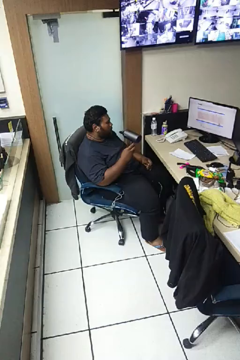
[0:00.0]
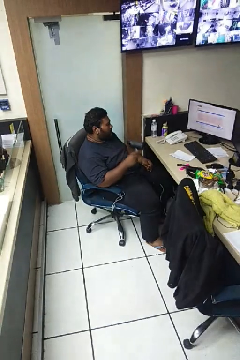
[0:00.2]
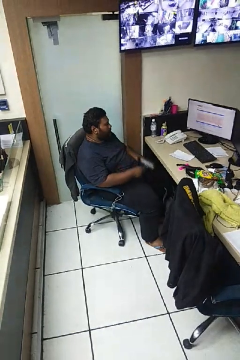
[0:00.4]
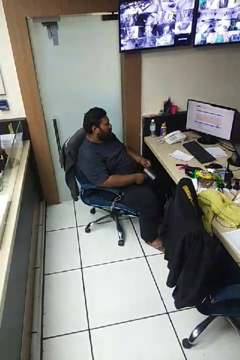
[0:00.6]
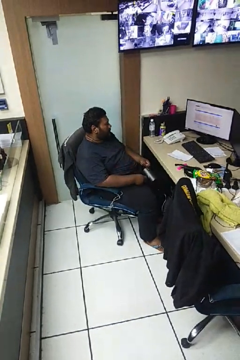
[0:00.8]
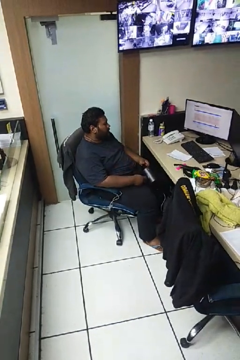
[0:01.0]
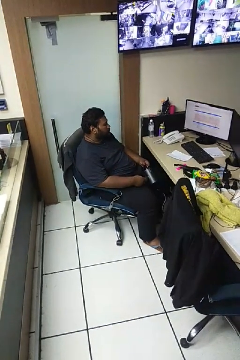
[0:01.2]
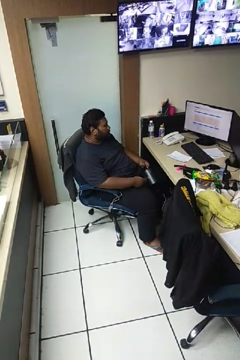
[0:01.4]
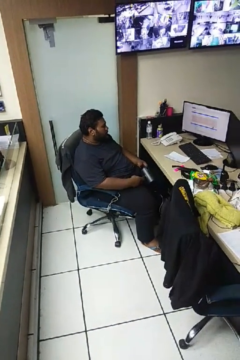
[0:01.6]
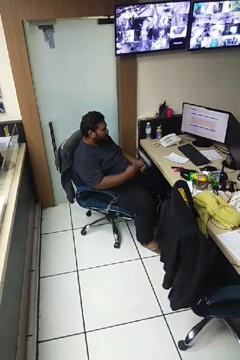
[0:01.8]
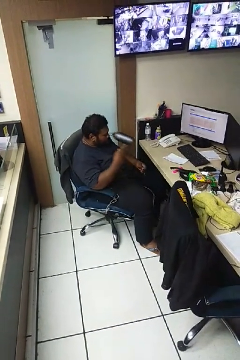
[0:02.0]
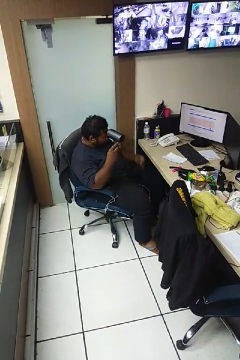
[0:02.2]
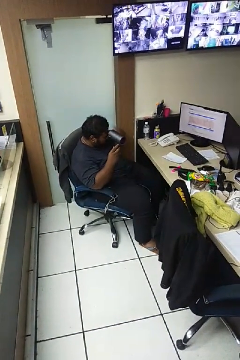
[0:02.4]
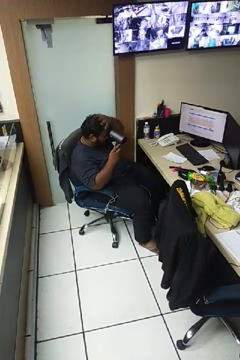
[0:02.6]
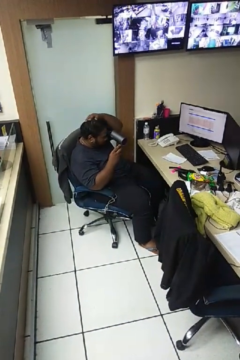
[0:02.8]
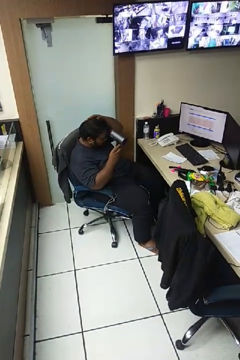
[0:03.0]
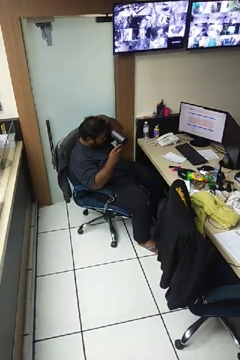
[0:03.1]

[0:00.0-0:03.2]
person dries hair with hairdryer

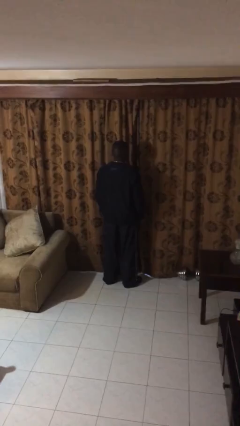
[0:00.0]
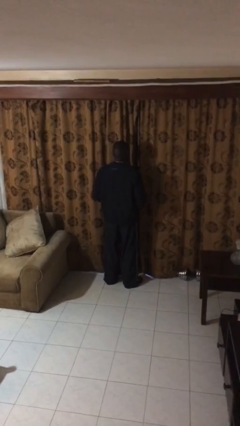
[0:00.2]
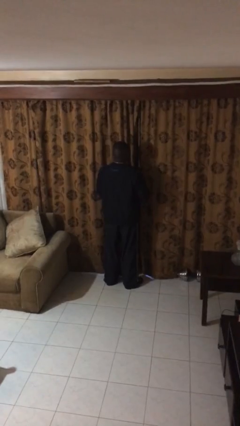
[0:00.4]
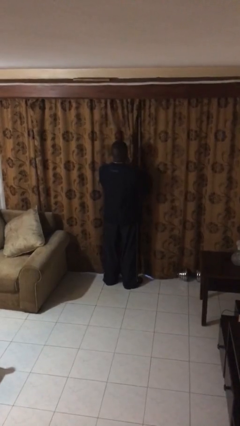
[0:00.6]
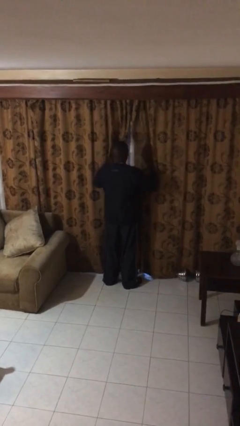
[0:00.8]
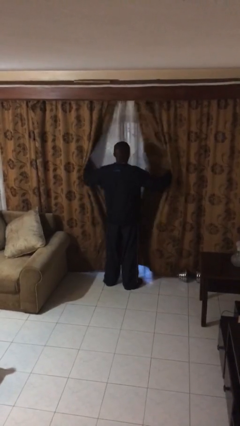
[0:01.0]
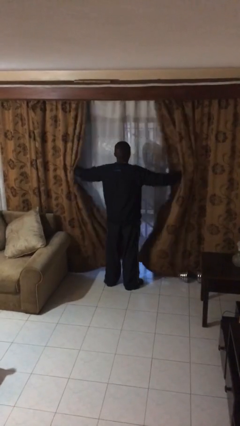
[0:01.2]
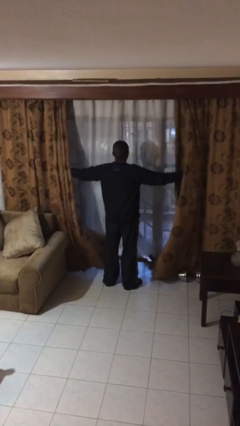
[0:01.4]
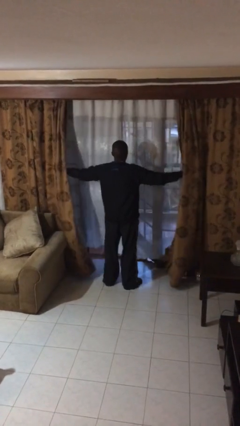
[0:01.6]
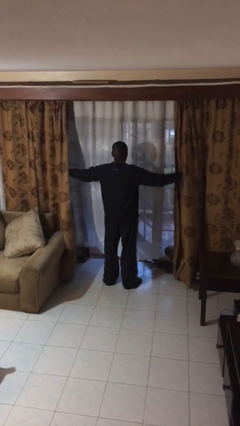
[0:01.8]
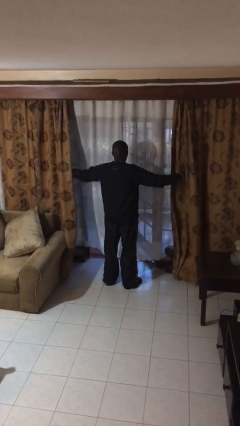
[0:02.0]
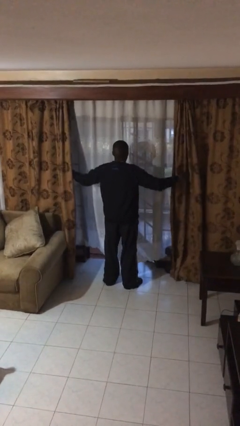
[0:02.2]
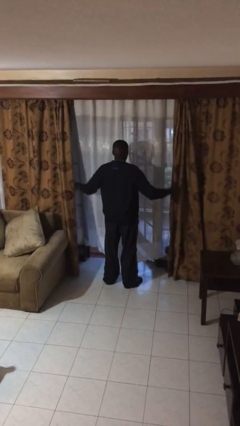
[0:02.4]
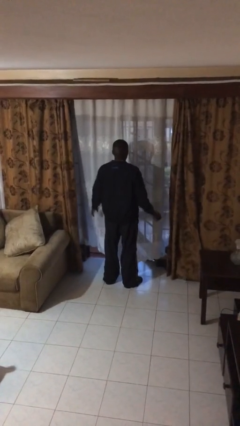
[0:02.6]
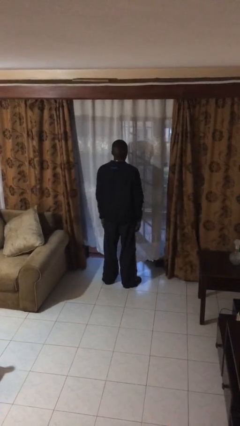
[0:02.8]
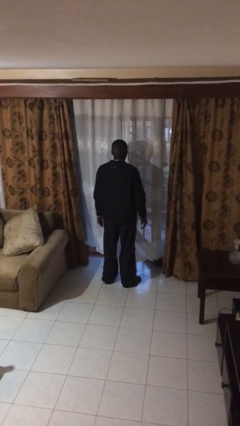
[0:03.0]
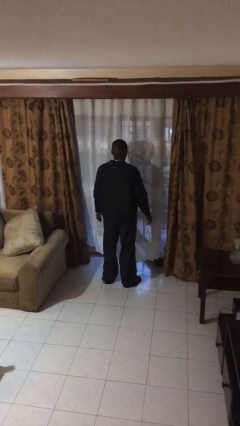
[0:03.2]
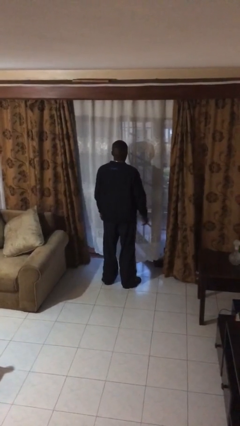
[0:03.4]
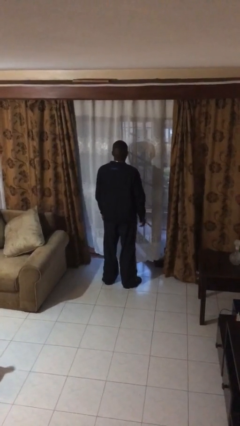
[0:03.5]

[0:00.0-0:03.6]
person opens curtains

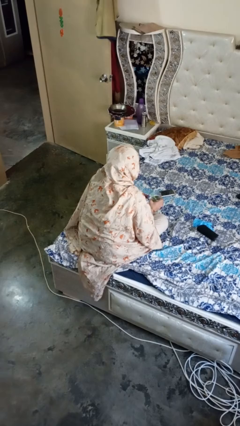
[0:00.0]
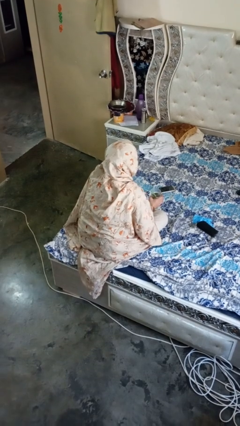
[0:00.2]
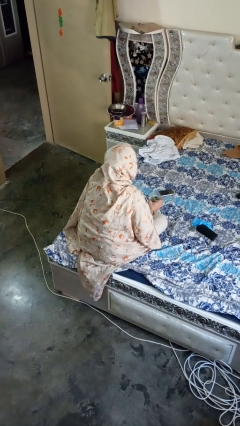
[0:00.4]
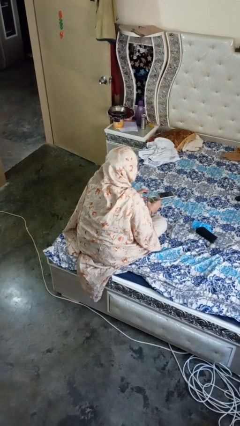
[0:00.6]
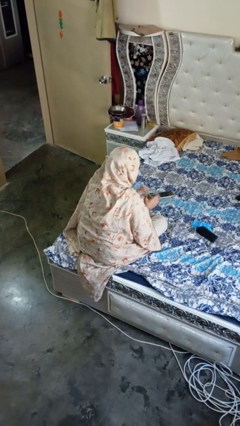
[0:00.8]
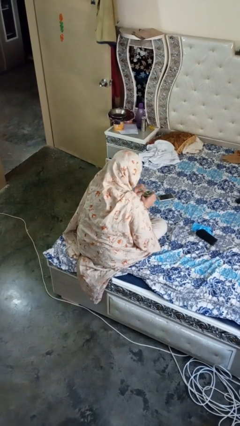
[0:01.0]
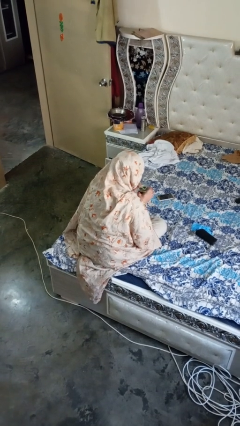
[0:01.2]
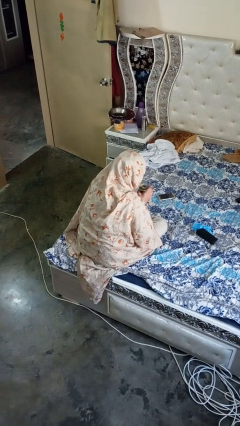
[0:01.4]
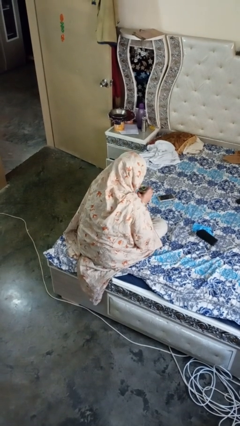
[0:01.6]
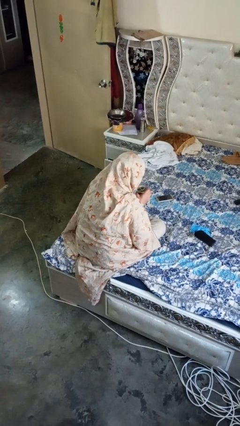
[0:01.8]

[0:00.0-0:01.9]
person drinks from straw

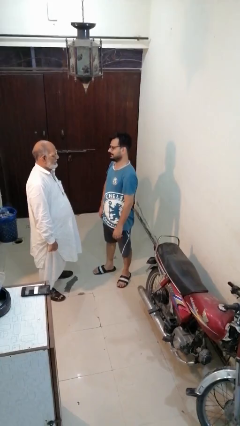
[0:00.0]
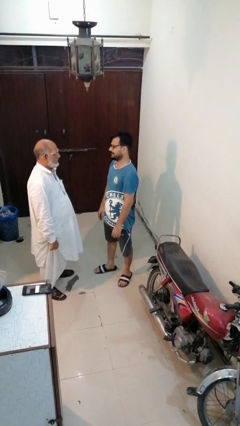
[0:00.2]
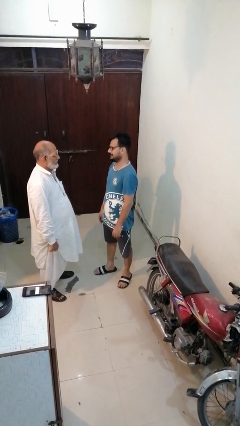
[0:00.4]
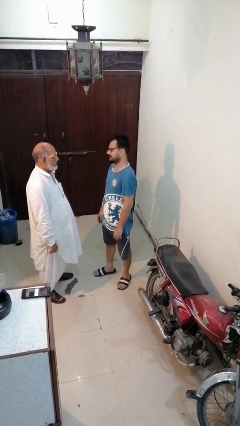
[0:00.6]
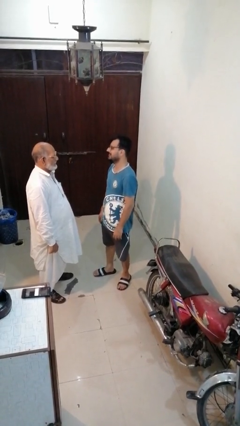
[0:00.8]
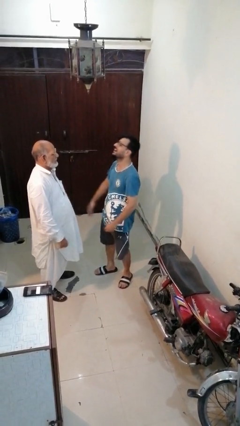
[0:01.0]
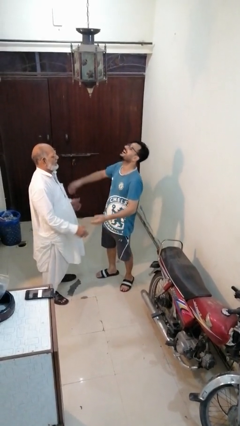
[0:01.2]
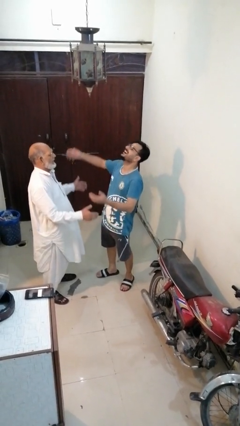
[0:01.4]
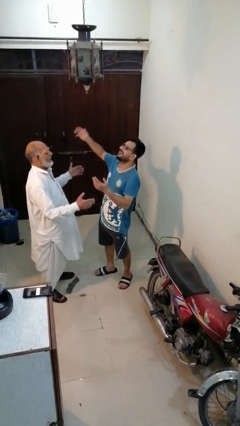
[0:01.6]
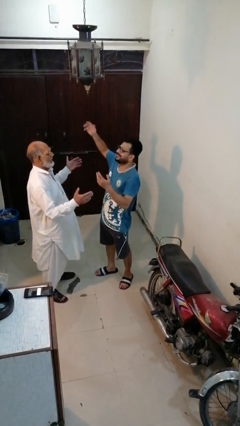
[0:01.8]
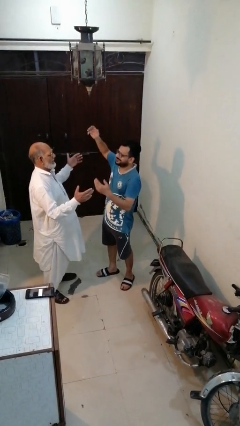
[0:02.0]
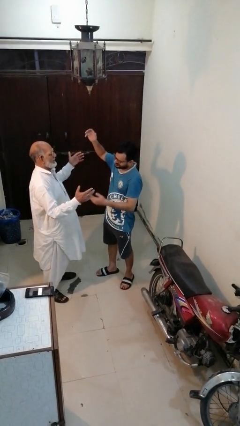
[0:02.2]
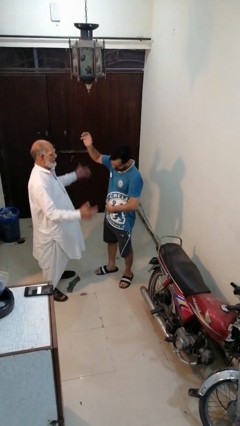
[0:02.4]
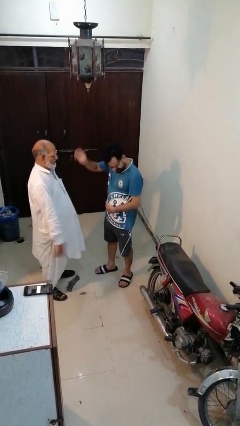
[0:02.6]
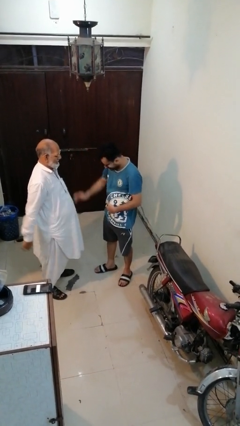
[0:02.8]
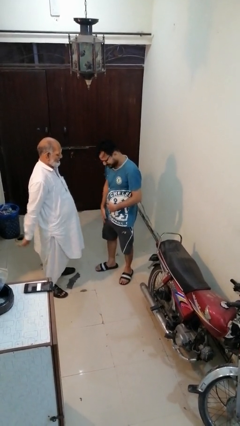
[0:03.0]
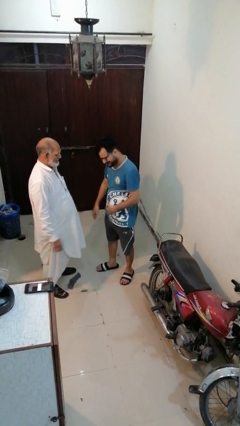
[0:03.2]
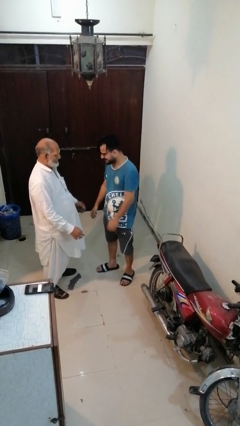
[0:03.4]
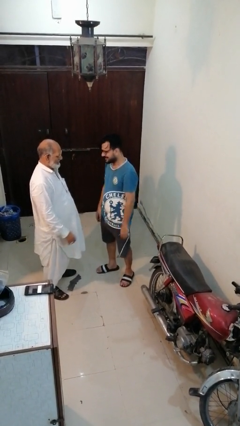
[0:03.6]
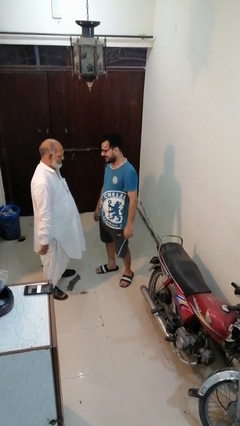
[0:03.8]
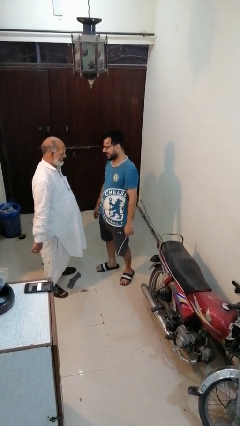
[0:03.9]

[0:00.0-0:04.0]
person laughs with person

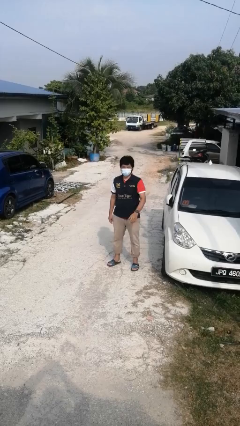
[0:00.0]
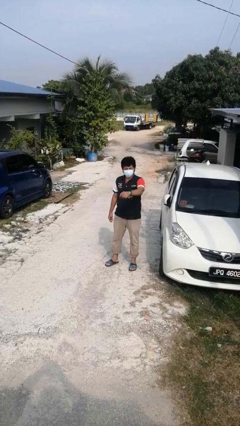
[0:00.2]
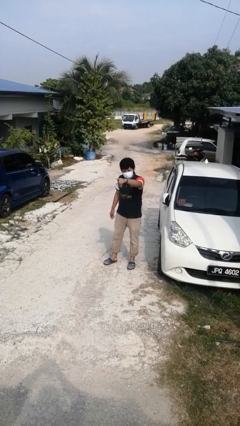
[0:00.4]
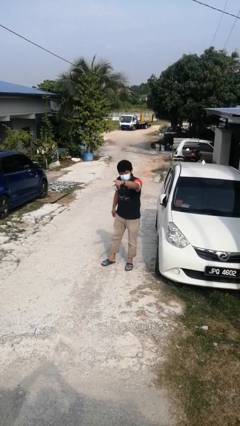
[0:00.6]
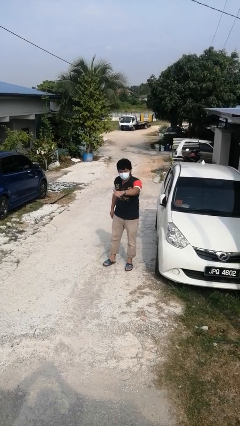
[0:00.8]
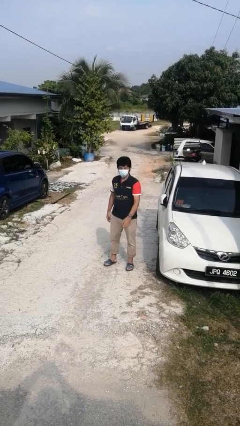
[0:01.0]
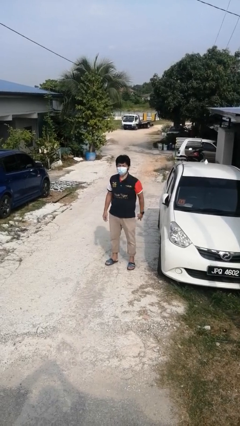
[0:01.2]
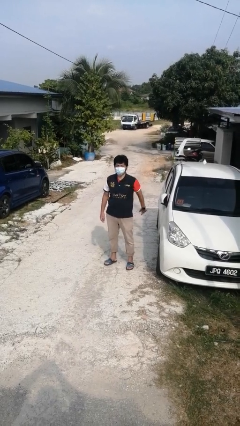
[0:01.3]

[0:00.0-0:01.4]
person points at person

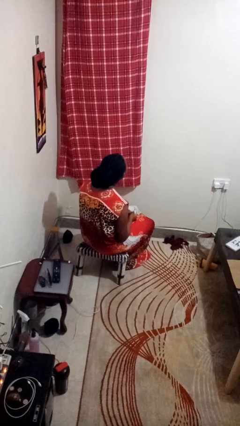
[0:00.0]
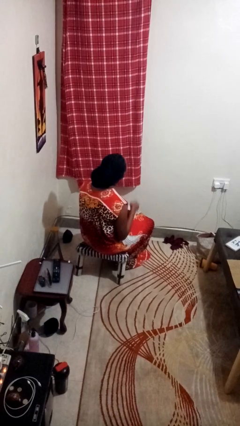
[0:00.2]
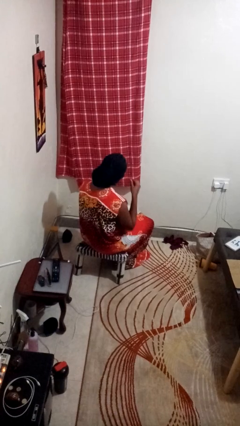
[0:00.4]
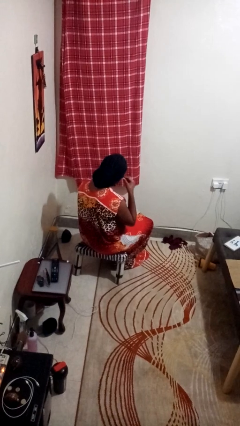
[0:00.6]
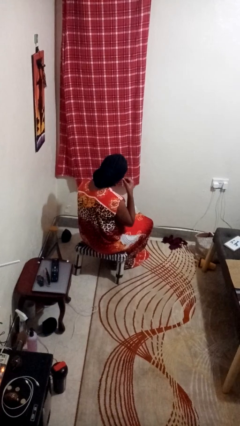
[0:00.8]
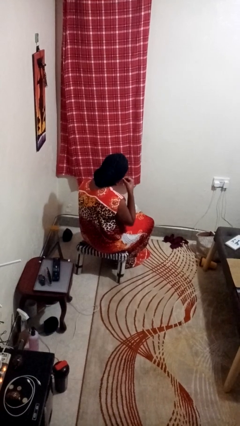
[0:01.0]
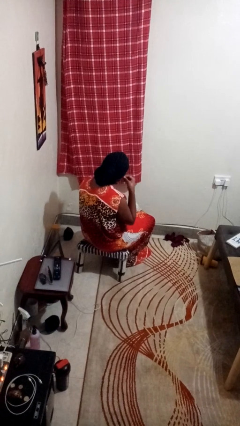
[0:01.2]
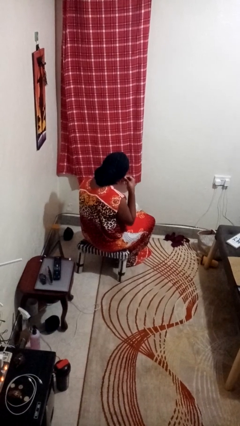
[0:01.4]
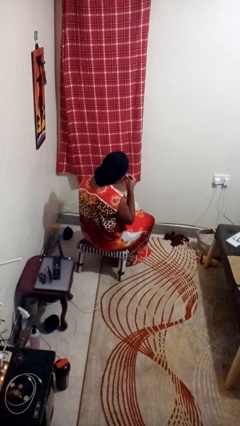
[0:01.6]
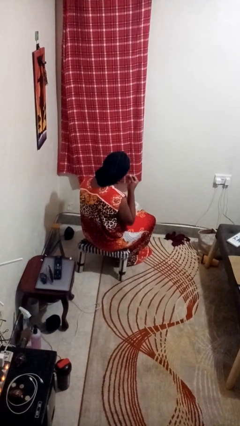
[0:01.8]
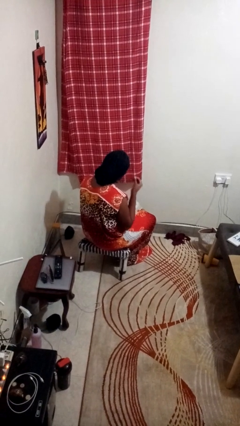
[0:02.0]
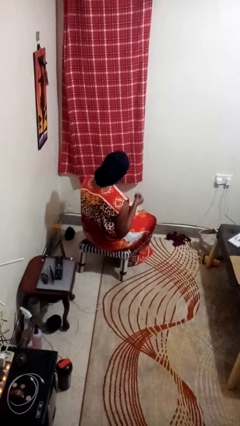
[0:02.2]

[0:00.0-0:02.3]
person takes off earrings

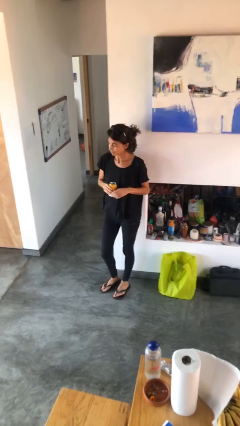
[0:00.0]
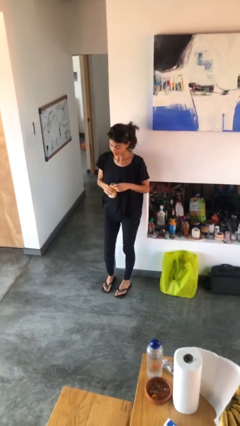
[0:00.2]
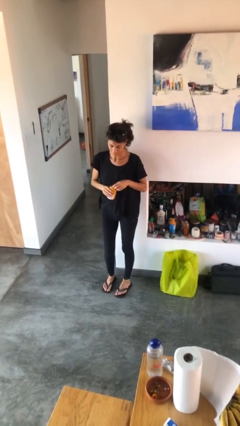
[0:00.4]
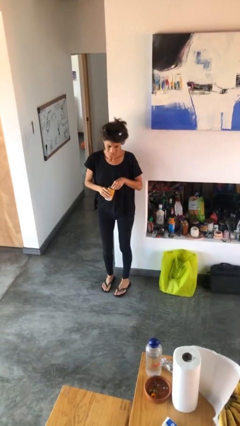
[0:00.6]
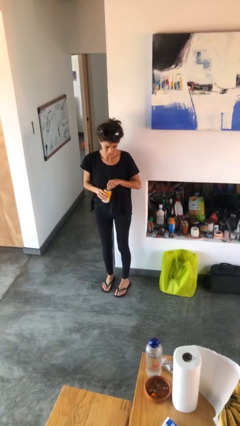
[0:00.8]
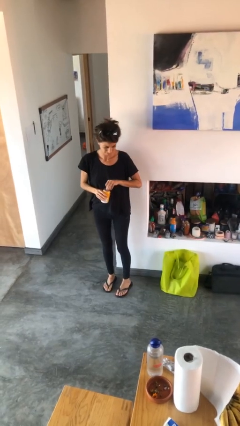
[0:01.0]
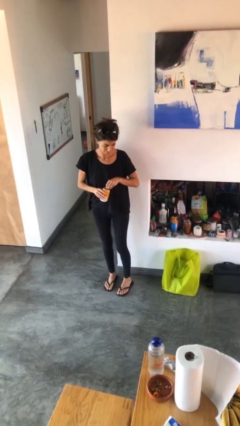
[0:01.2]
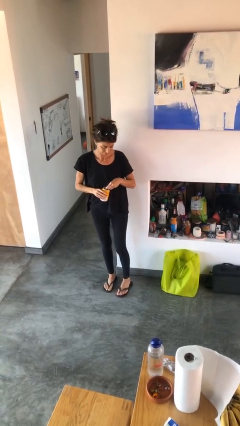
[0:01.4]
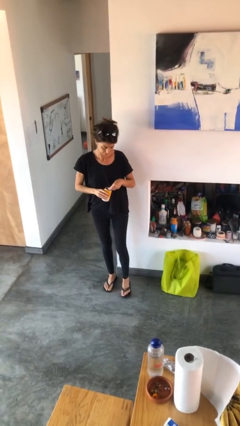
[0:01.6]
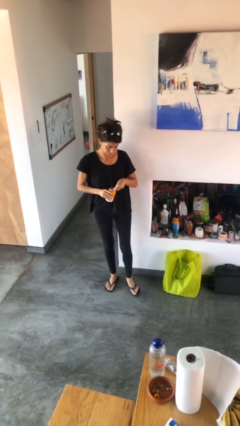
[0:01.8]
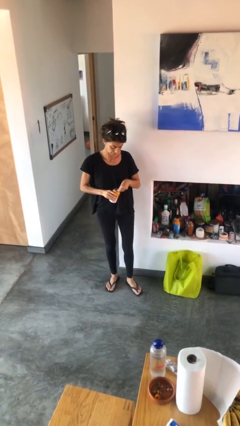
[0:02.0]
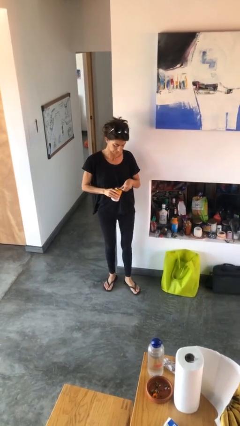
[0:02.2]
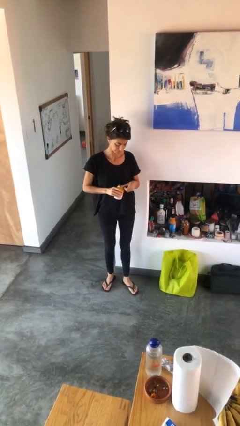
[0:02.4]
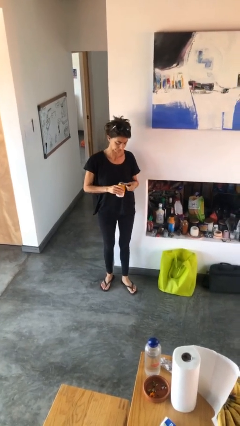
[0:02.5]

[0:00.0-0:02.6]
person opens beverage can
